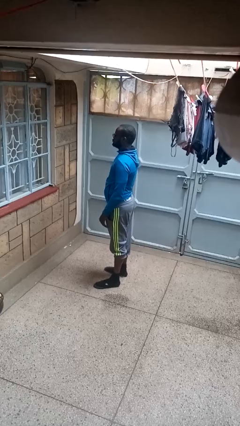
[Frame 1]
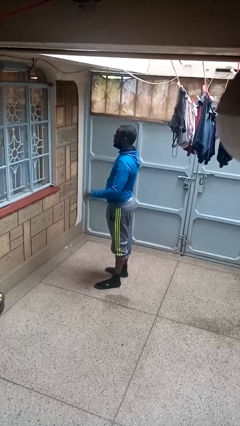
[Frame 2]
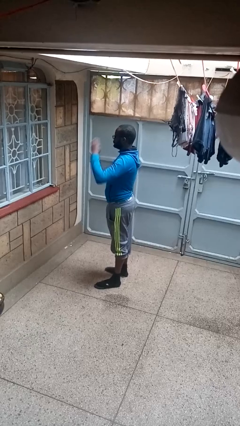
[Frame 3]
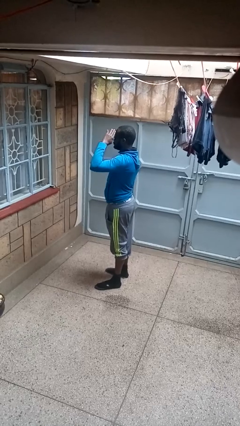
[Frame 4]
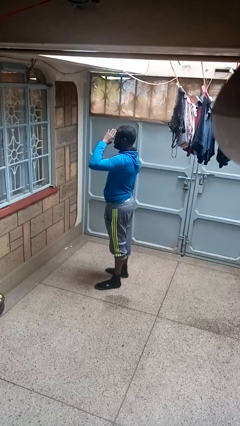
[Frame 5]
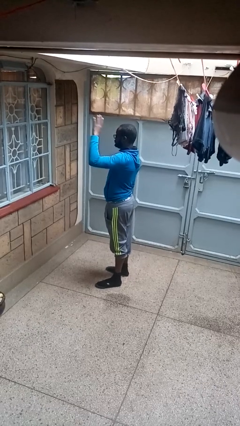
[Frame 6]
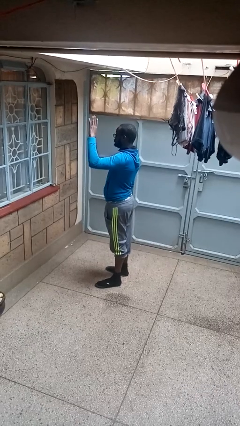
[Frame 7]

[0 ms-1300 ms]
person salutes

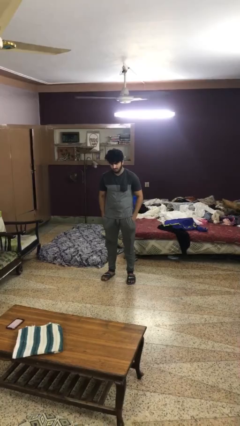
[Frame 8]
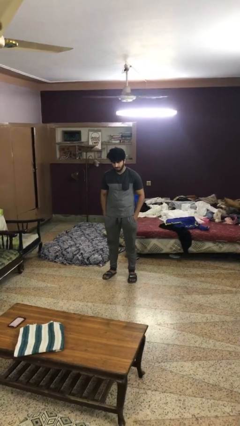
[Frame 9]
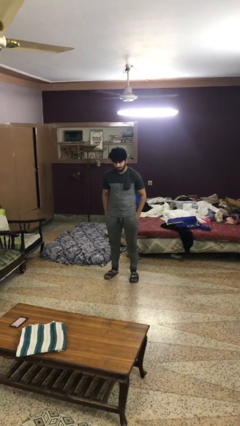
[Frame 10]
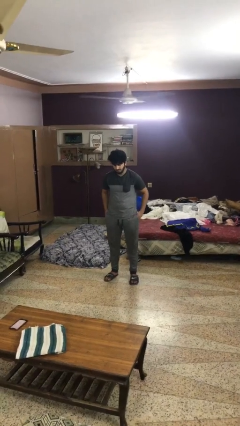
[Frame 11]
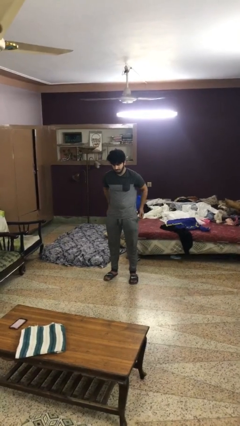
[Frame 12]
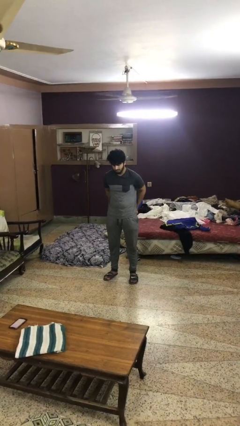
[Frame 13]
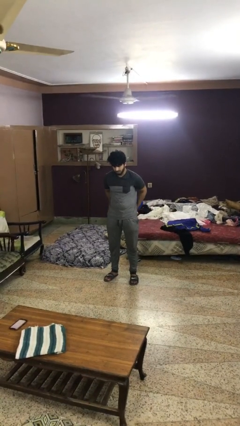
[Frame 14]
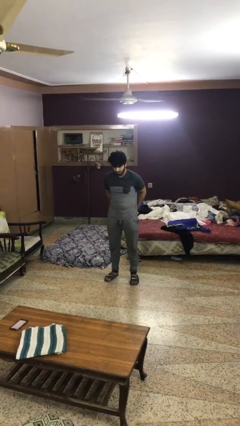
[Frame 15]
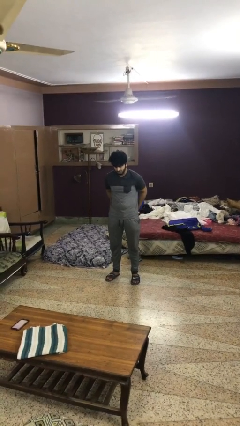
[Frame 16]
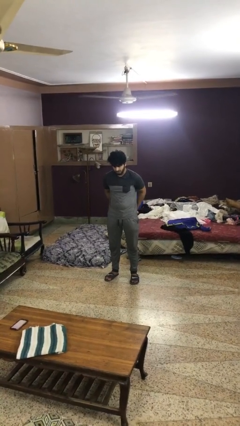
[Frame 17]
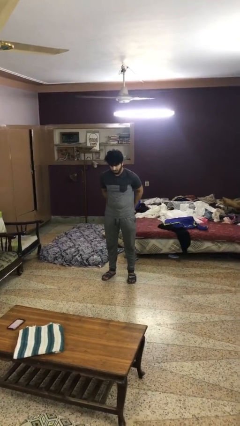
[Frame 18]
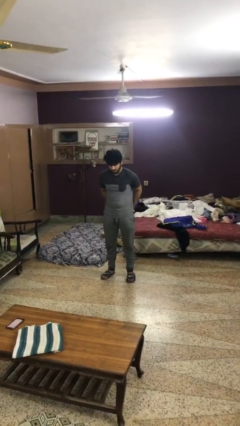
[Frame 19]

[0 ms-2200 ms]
person puts hands in back pockets

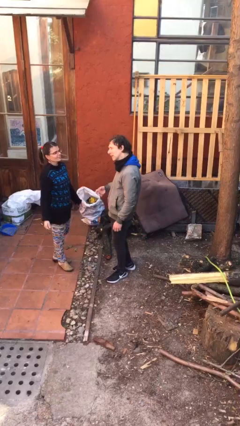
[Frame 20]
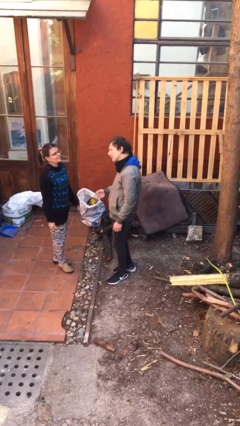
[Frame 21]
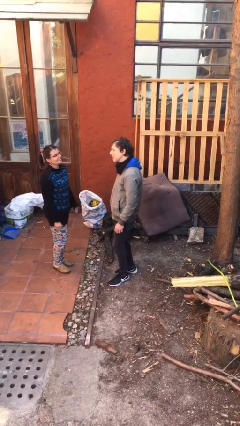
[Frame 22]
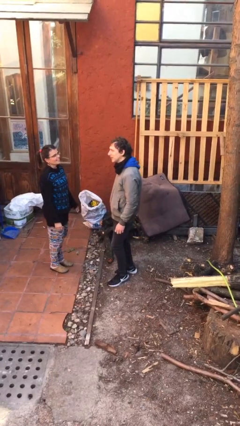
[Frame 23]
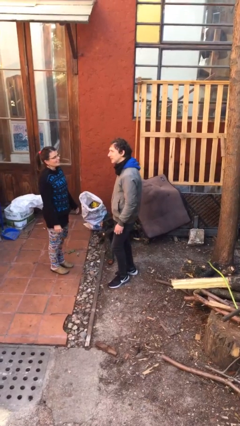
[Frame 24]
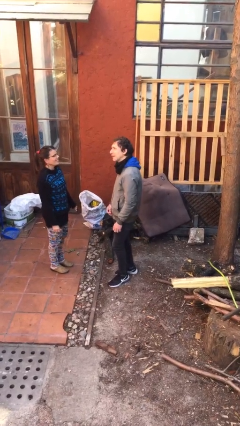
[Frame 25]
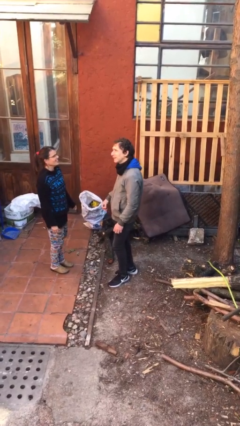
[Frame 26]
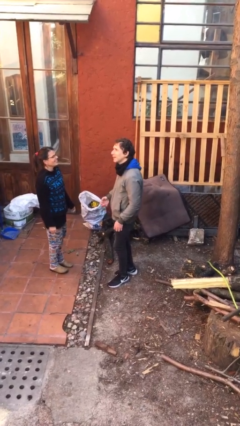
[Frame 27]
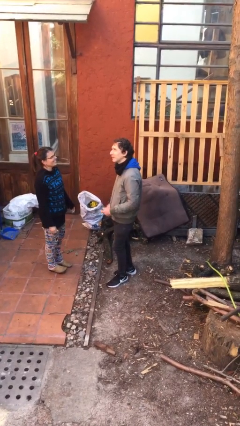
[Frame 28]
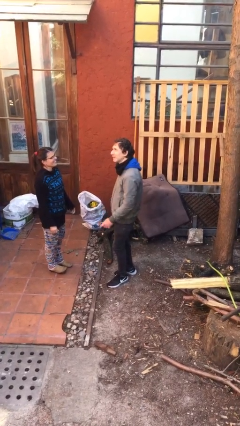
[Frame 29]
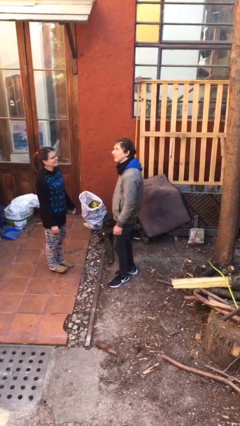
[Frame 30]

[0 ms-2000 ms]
person talks to person

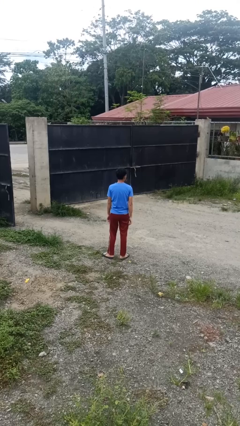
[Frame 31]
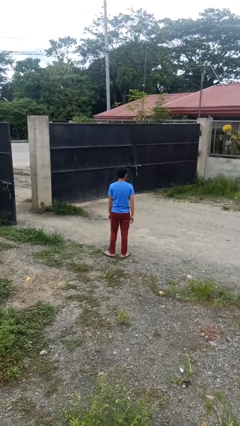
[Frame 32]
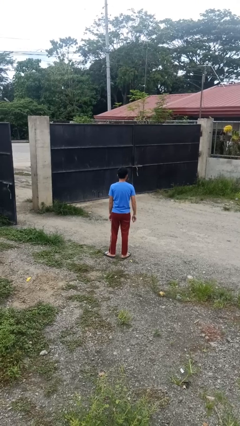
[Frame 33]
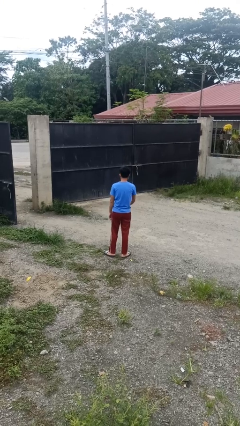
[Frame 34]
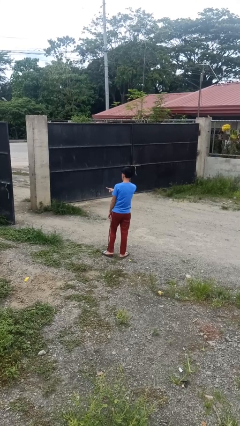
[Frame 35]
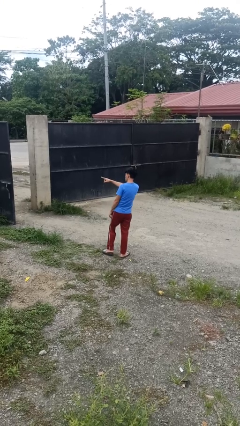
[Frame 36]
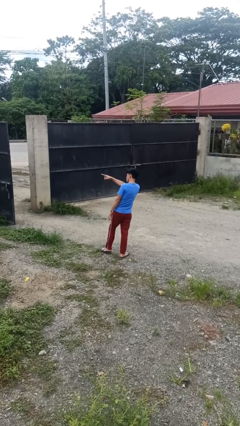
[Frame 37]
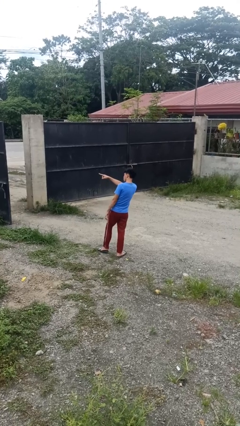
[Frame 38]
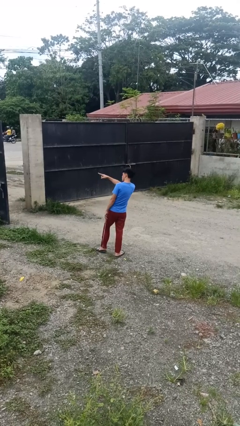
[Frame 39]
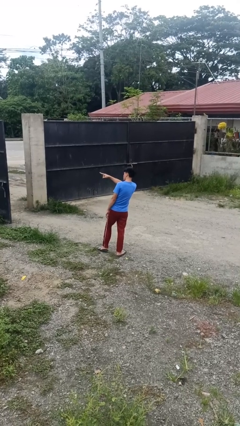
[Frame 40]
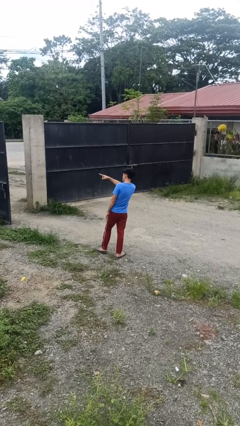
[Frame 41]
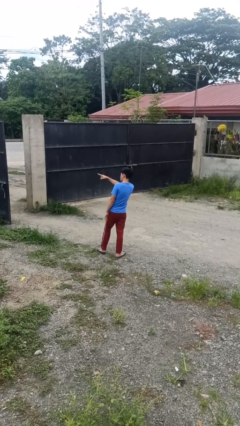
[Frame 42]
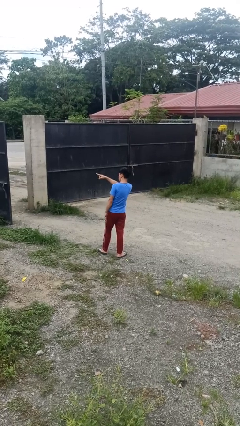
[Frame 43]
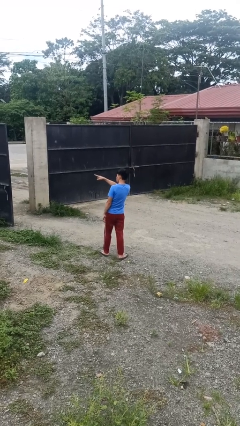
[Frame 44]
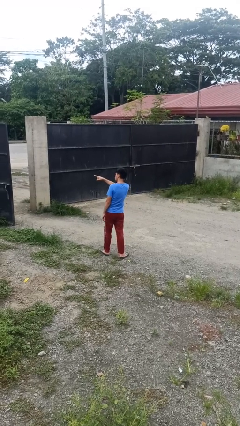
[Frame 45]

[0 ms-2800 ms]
person points at person

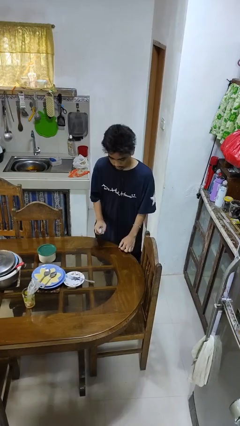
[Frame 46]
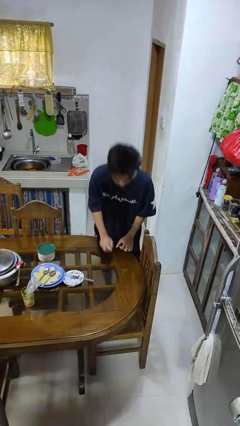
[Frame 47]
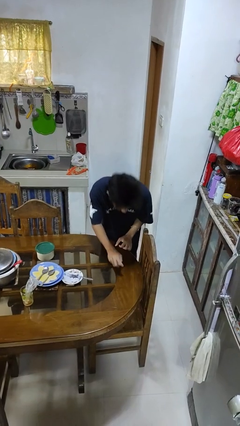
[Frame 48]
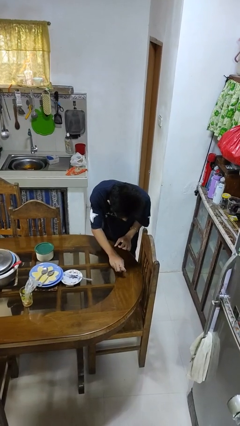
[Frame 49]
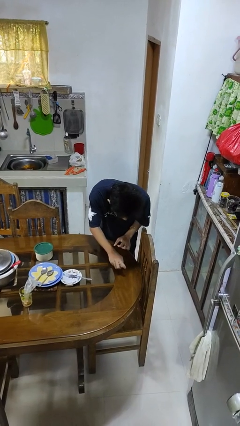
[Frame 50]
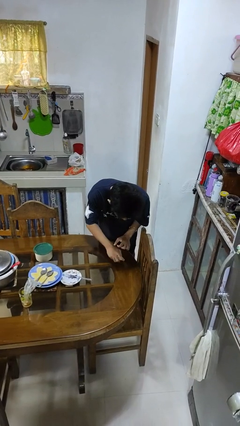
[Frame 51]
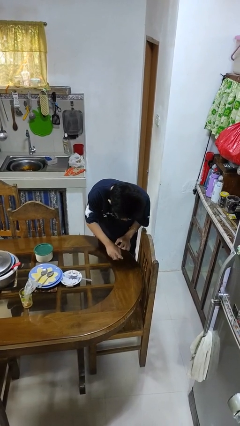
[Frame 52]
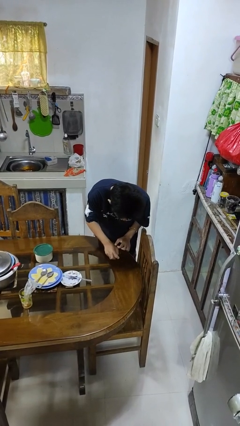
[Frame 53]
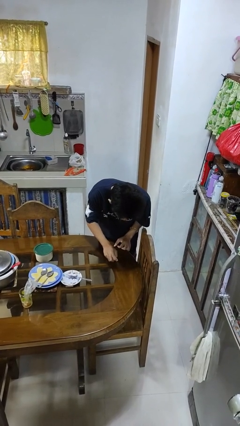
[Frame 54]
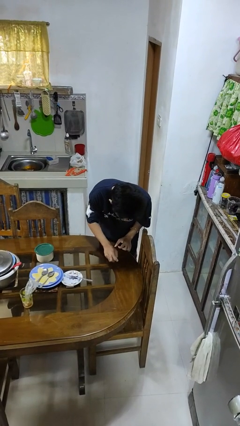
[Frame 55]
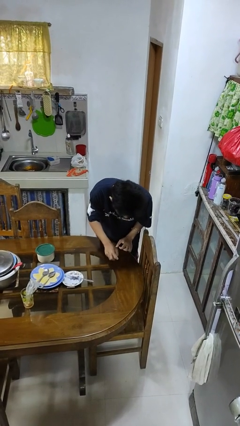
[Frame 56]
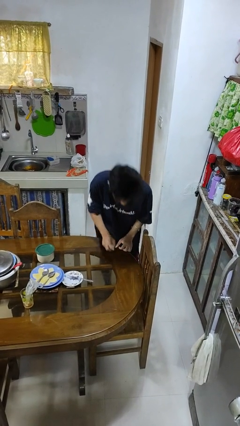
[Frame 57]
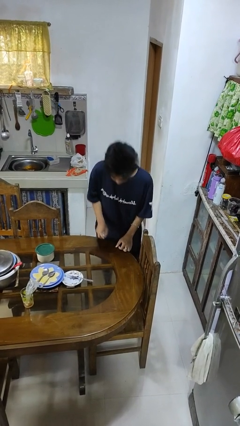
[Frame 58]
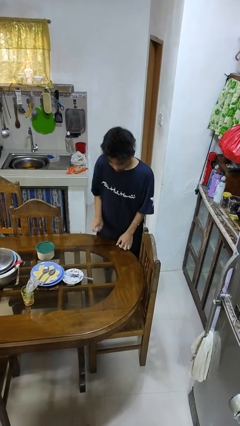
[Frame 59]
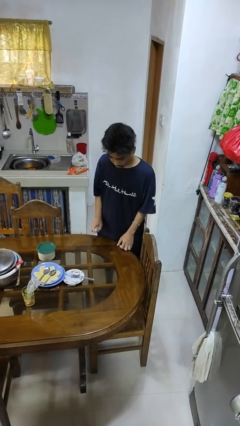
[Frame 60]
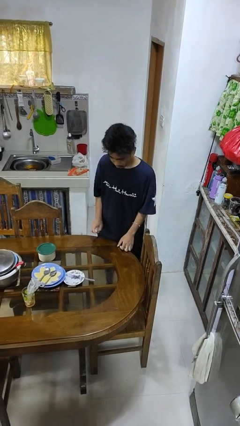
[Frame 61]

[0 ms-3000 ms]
person sprays from bottle

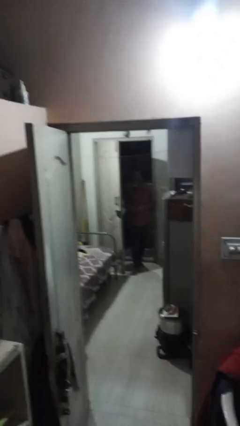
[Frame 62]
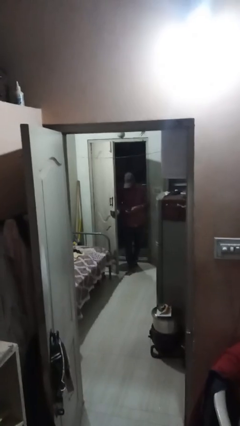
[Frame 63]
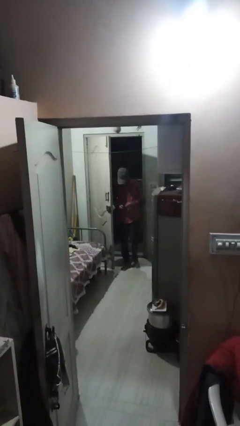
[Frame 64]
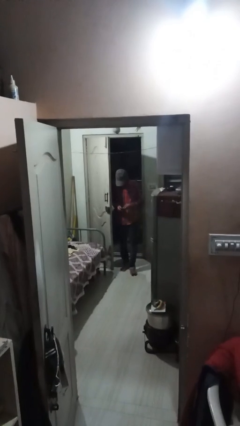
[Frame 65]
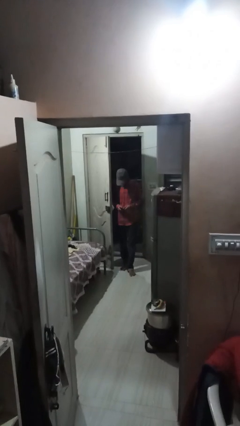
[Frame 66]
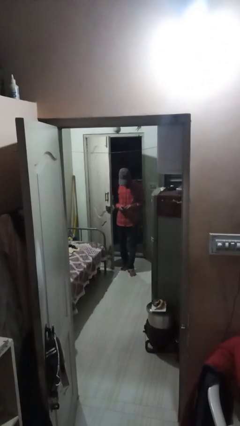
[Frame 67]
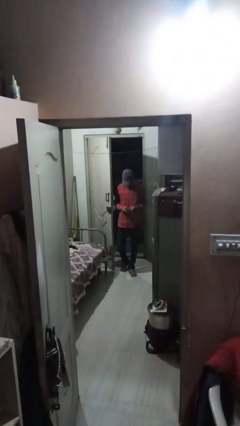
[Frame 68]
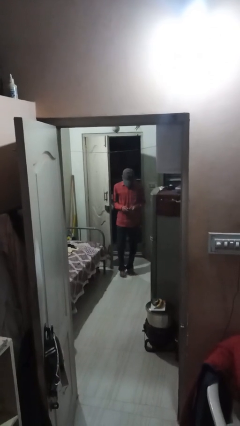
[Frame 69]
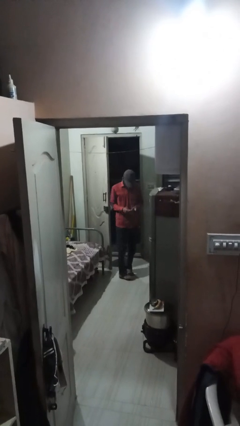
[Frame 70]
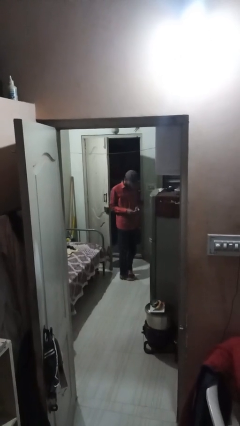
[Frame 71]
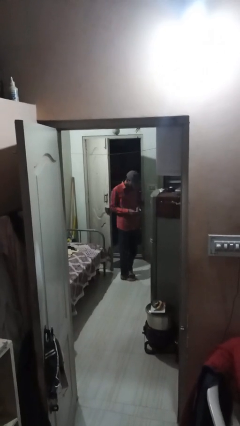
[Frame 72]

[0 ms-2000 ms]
person enters scene through structure

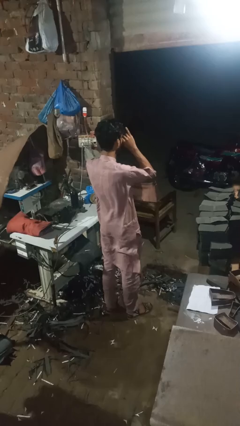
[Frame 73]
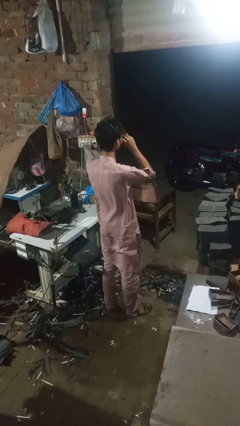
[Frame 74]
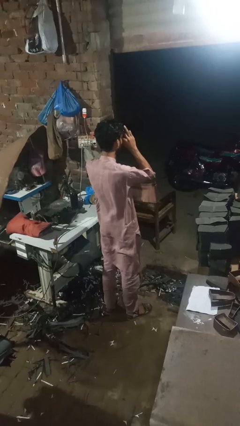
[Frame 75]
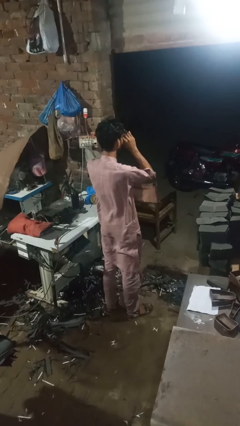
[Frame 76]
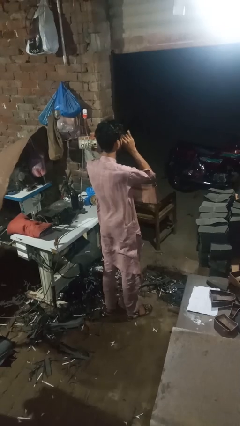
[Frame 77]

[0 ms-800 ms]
person rubs eyes

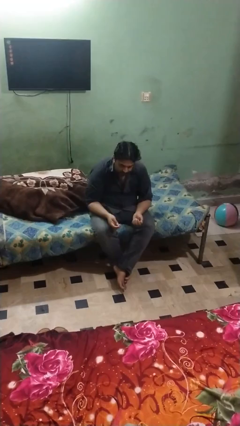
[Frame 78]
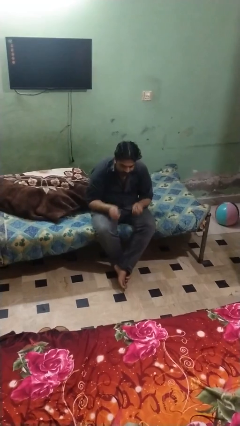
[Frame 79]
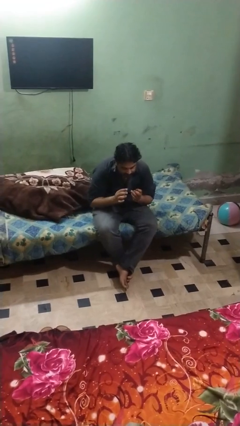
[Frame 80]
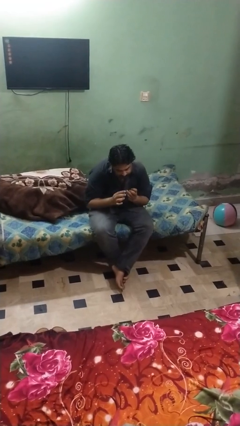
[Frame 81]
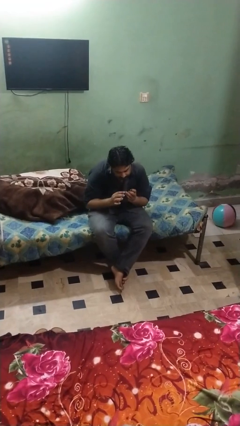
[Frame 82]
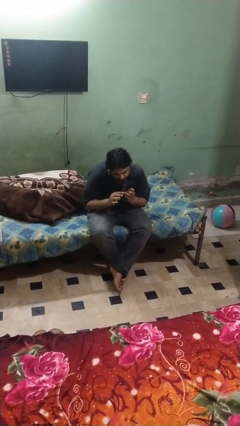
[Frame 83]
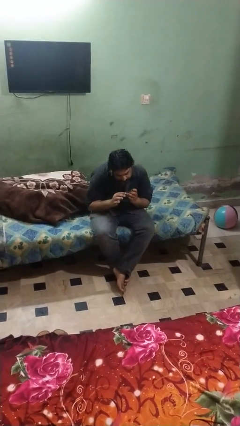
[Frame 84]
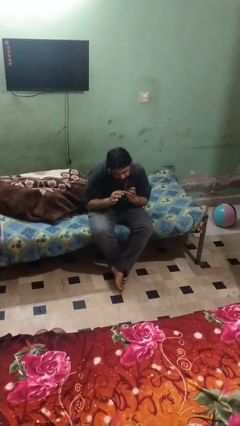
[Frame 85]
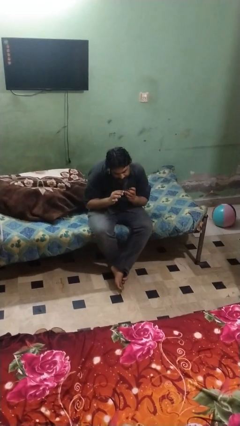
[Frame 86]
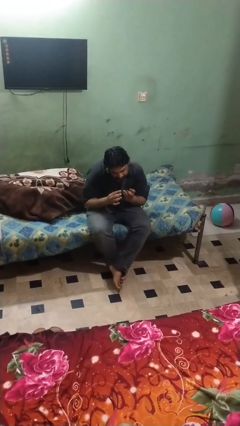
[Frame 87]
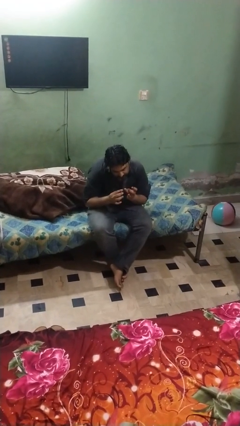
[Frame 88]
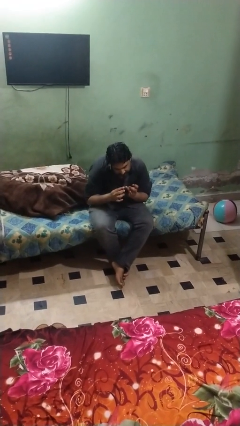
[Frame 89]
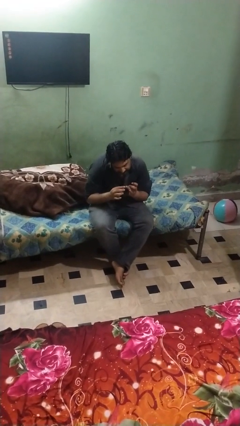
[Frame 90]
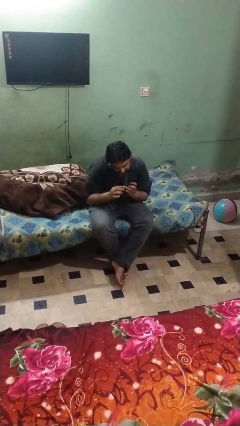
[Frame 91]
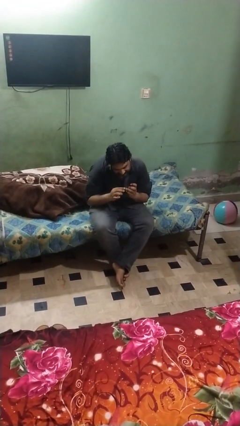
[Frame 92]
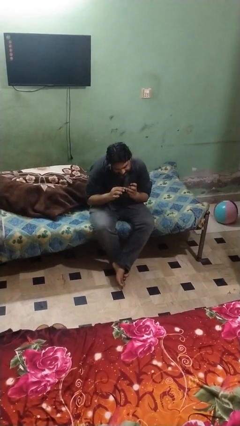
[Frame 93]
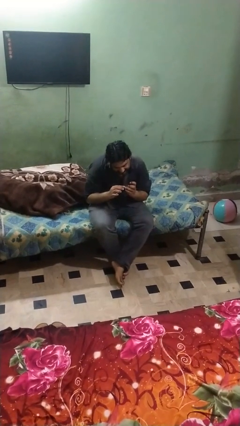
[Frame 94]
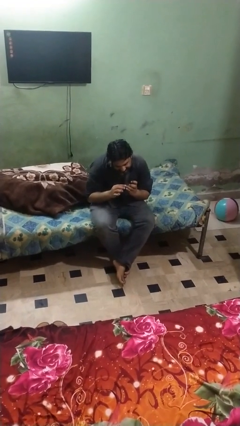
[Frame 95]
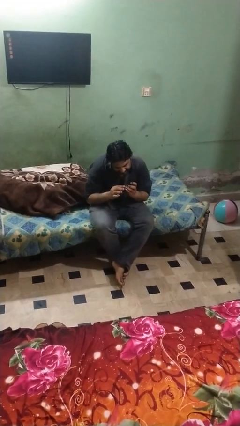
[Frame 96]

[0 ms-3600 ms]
person files fingernails
